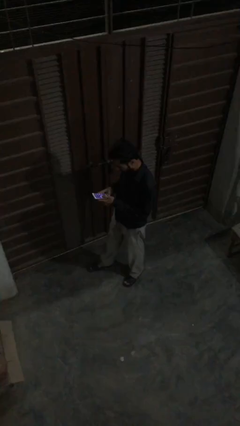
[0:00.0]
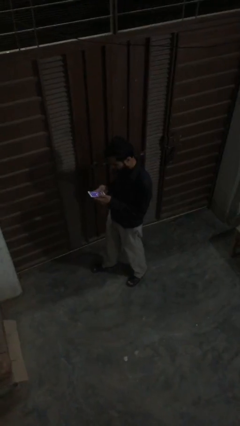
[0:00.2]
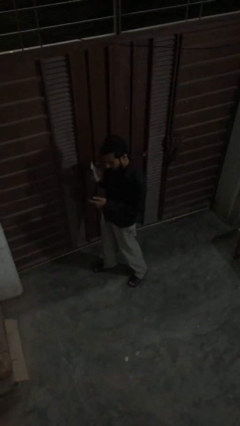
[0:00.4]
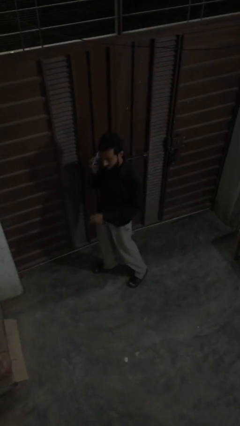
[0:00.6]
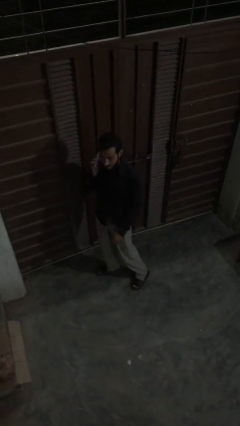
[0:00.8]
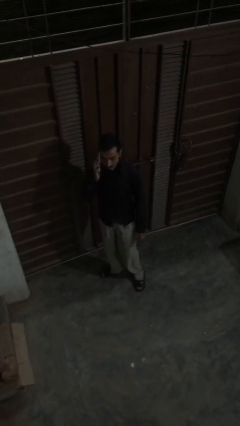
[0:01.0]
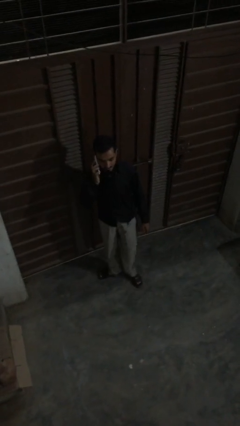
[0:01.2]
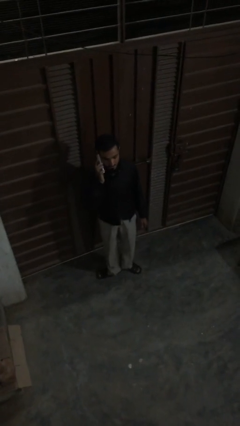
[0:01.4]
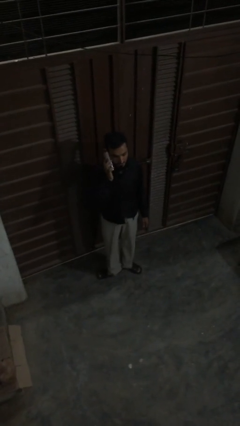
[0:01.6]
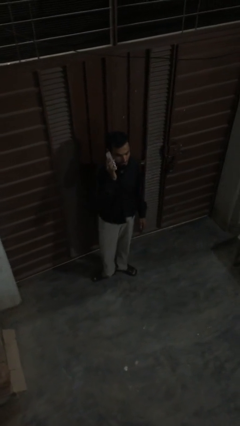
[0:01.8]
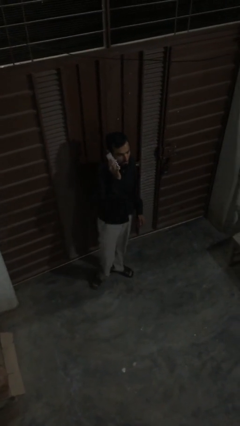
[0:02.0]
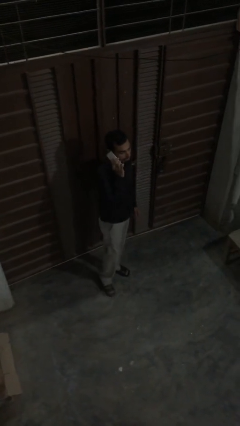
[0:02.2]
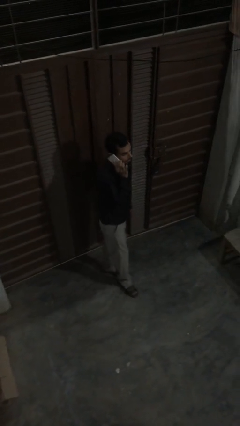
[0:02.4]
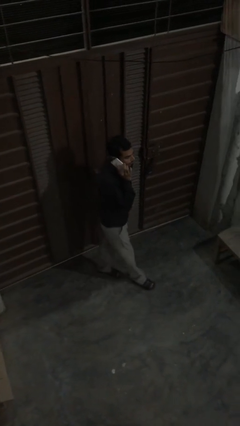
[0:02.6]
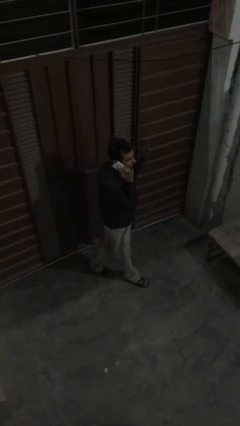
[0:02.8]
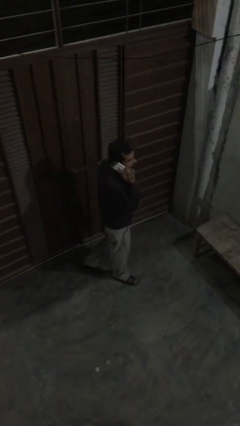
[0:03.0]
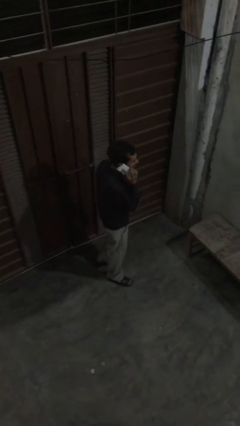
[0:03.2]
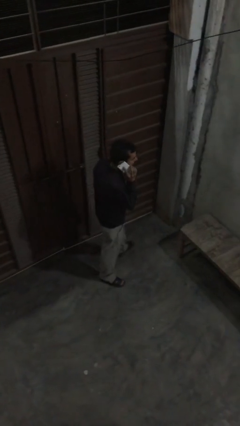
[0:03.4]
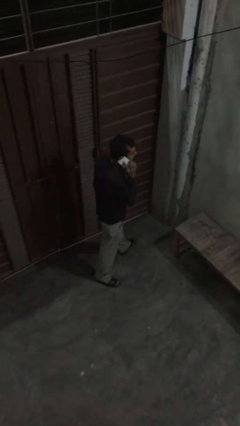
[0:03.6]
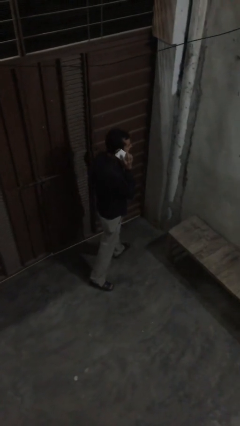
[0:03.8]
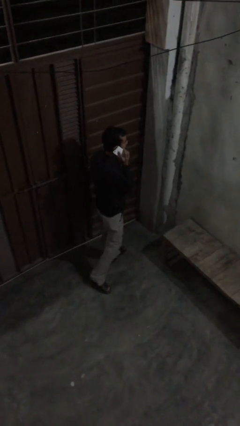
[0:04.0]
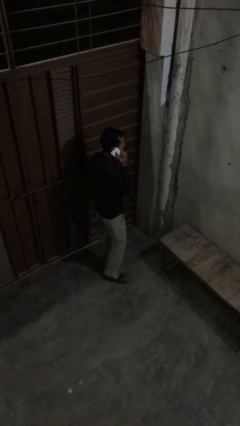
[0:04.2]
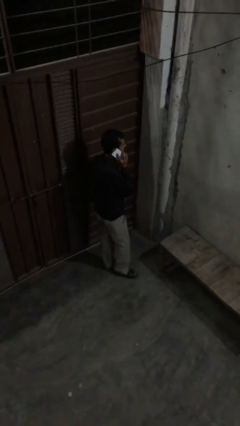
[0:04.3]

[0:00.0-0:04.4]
person talks on phone

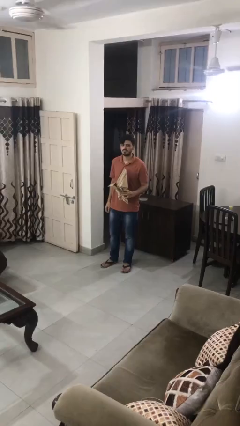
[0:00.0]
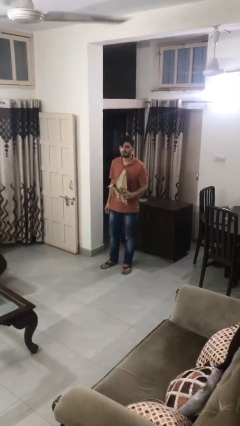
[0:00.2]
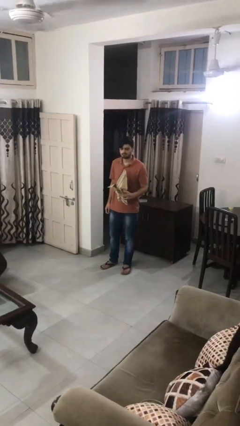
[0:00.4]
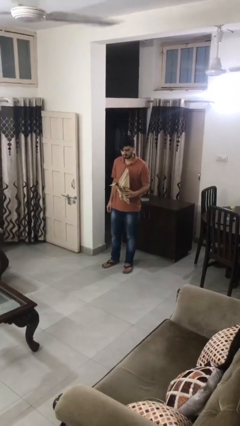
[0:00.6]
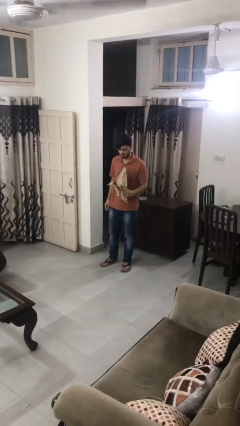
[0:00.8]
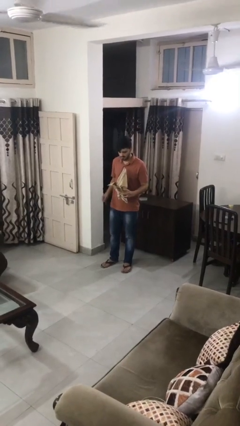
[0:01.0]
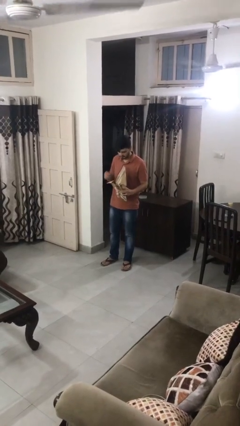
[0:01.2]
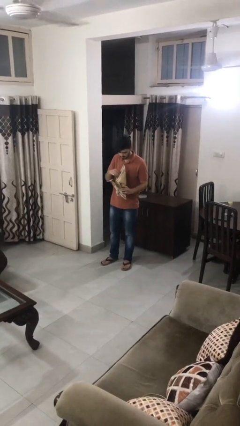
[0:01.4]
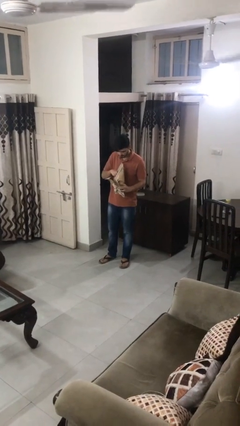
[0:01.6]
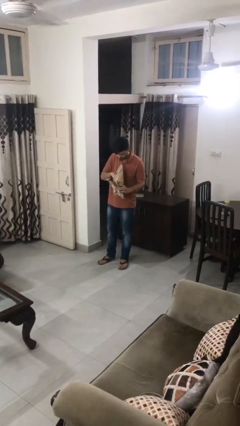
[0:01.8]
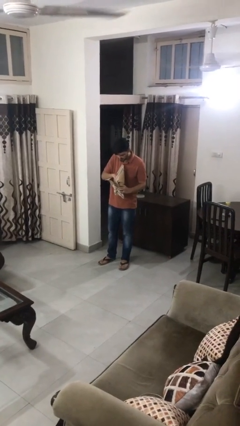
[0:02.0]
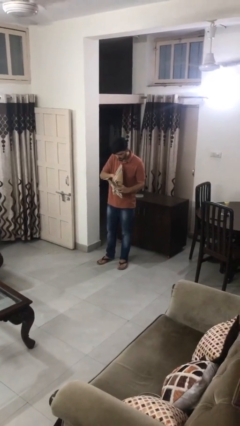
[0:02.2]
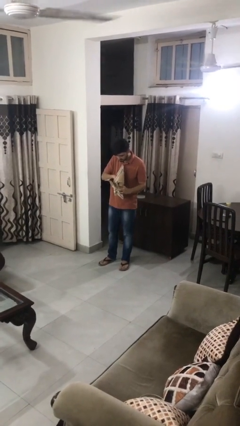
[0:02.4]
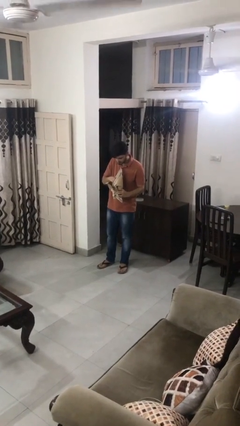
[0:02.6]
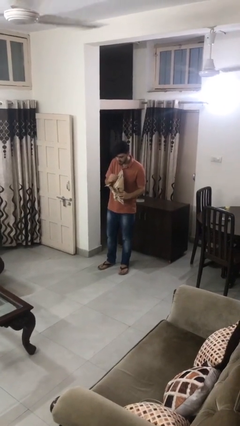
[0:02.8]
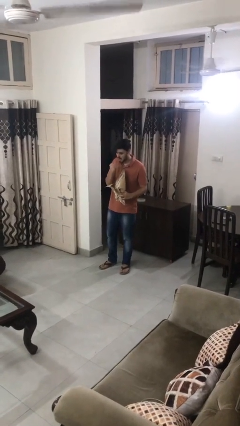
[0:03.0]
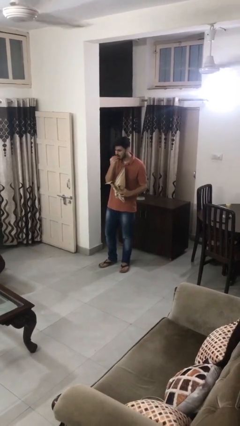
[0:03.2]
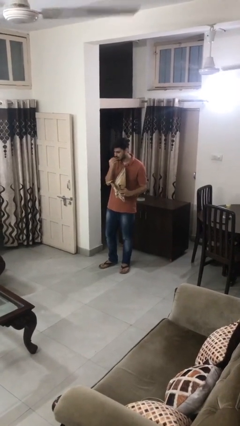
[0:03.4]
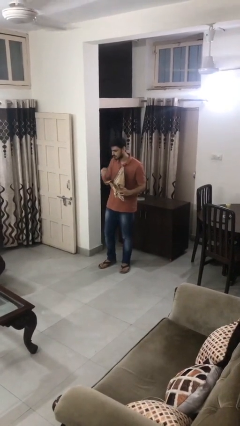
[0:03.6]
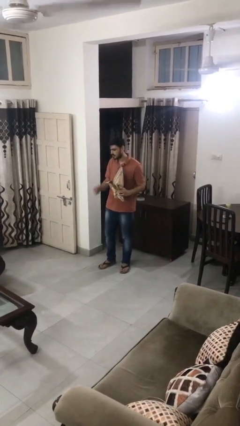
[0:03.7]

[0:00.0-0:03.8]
person eats snack from bag

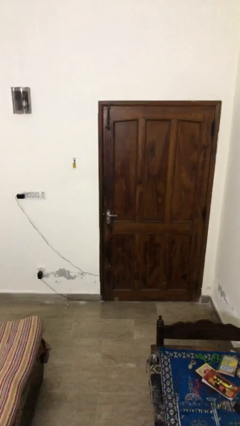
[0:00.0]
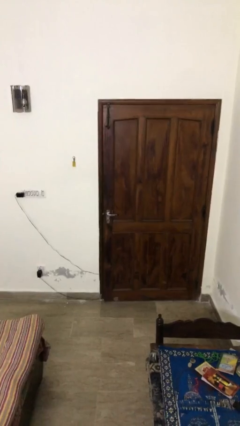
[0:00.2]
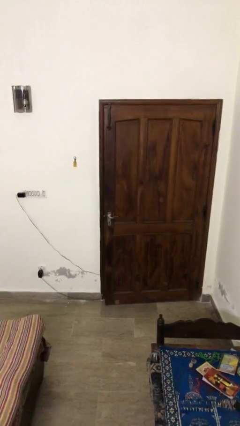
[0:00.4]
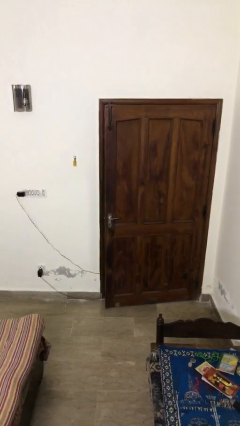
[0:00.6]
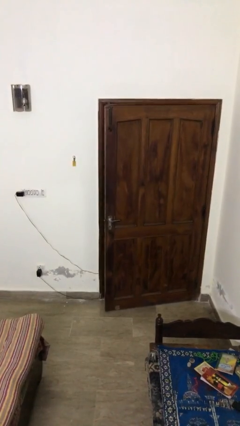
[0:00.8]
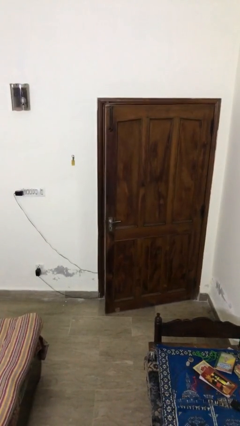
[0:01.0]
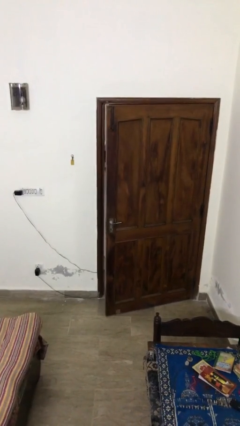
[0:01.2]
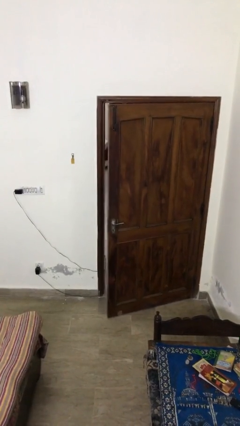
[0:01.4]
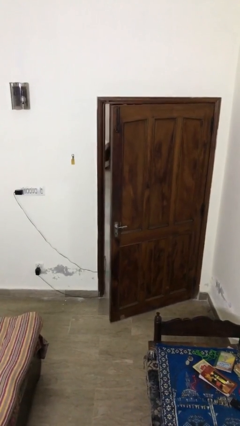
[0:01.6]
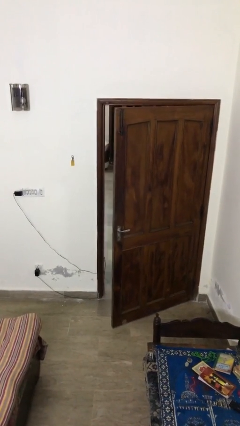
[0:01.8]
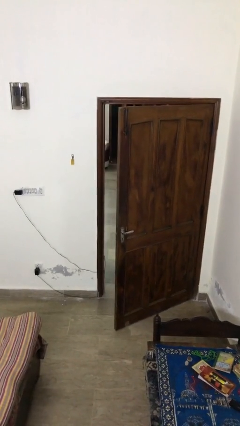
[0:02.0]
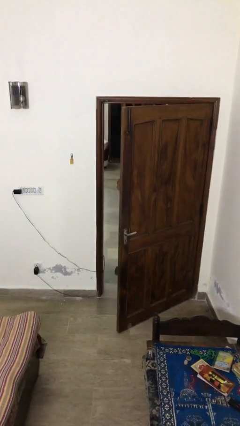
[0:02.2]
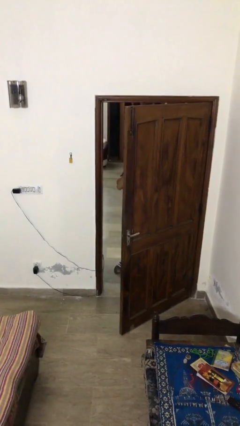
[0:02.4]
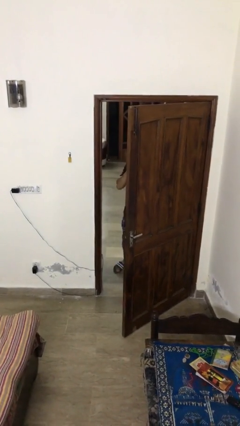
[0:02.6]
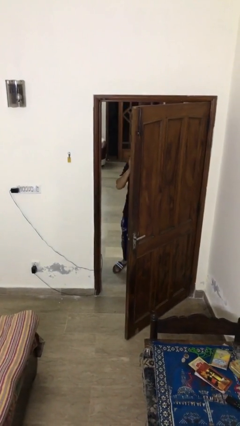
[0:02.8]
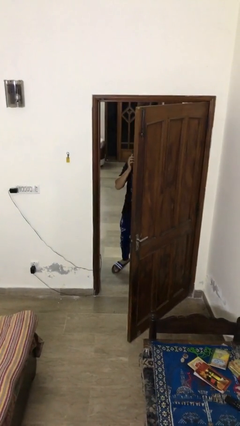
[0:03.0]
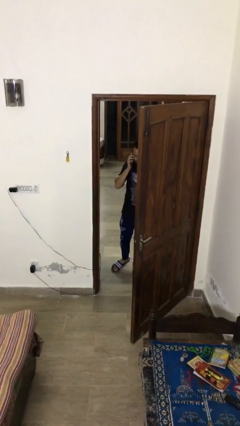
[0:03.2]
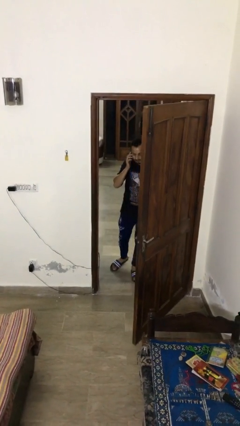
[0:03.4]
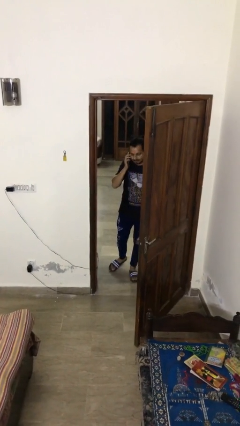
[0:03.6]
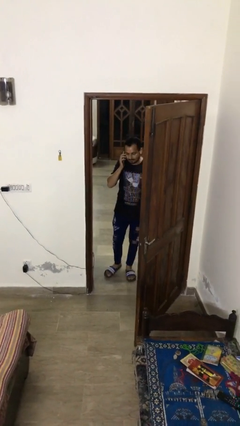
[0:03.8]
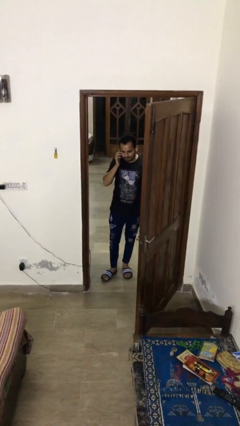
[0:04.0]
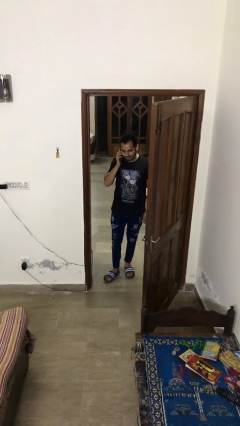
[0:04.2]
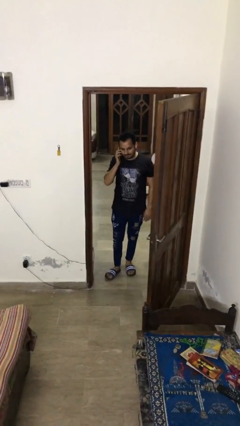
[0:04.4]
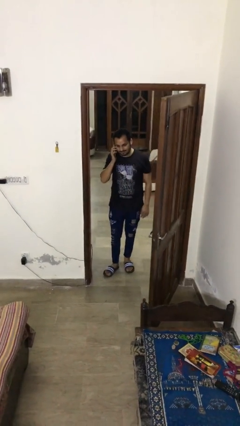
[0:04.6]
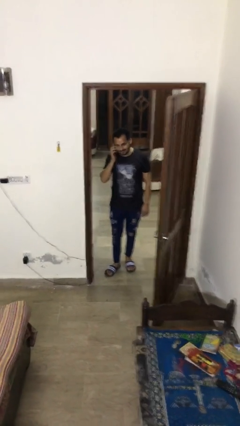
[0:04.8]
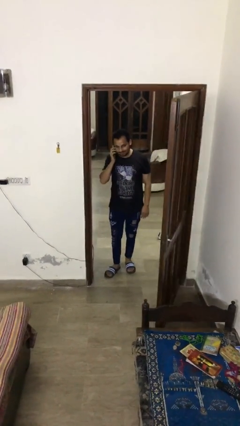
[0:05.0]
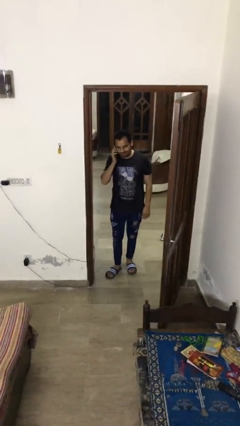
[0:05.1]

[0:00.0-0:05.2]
person opens facility door

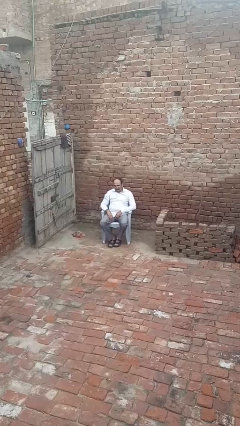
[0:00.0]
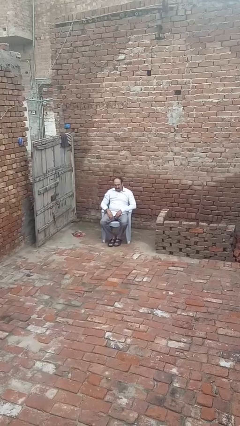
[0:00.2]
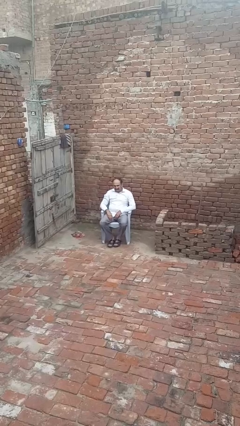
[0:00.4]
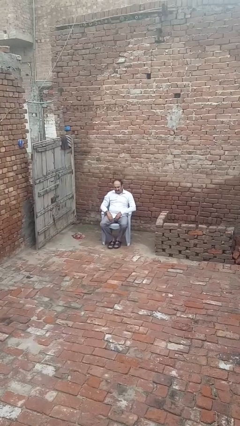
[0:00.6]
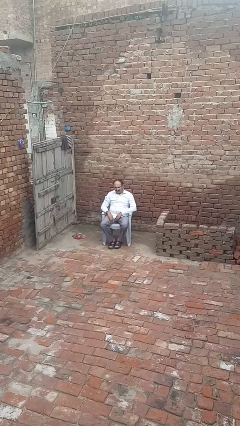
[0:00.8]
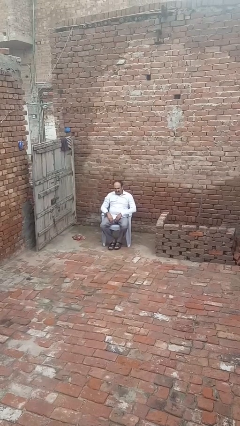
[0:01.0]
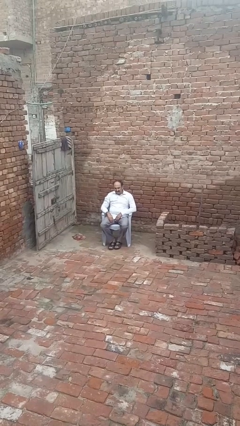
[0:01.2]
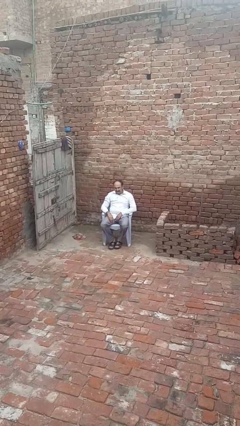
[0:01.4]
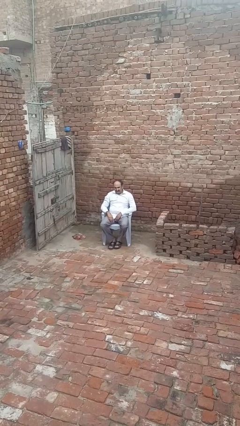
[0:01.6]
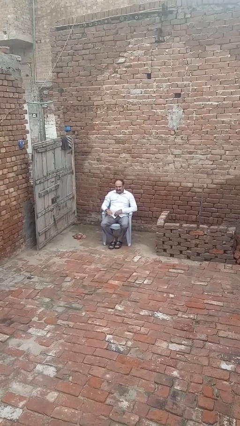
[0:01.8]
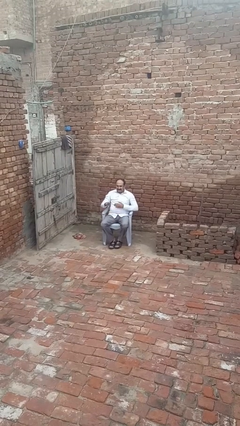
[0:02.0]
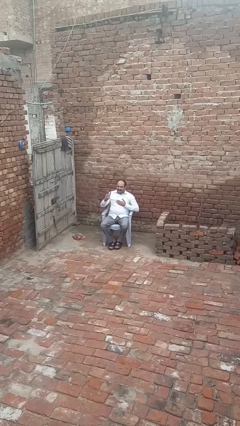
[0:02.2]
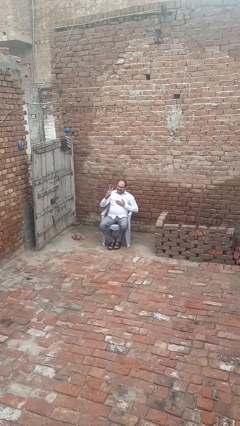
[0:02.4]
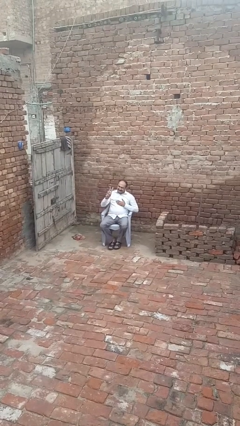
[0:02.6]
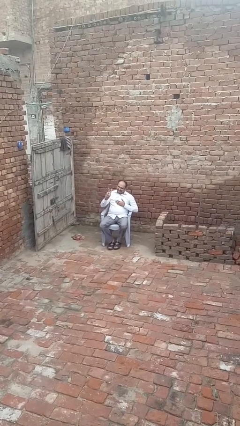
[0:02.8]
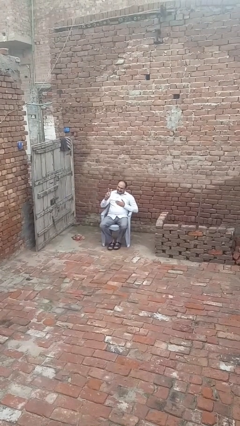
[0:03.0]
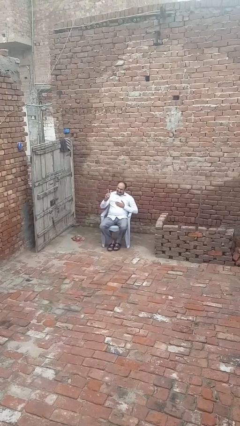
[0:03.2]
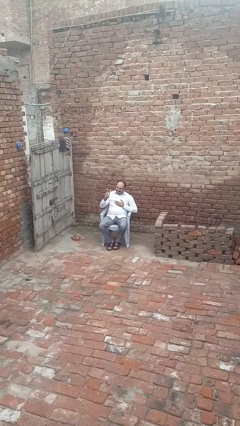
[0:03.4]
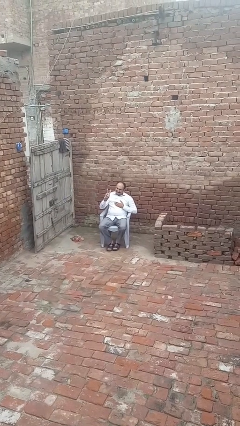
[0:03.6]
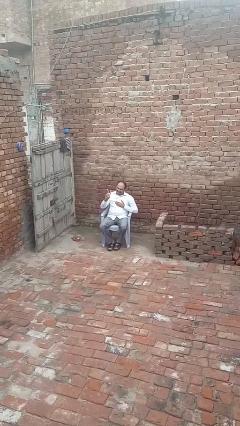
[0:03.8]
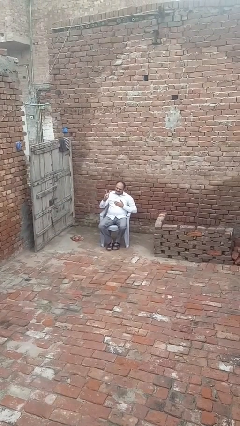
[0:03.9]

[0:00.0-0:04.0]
person gestures peace
